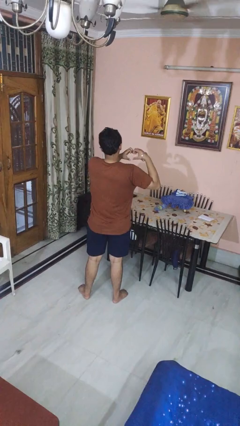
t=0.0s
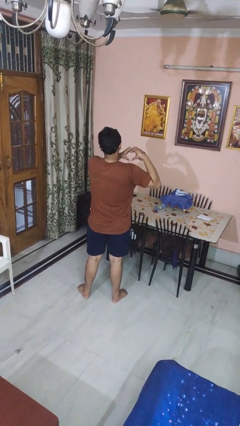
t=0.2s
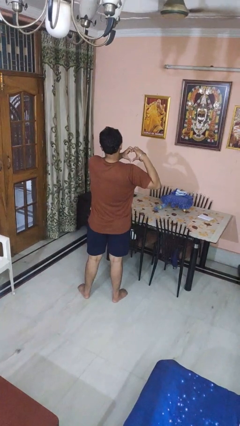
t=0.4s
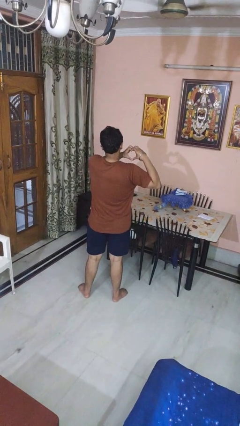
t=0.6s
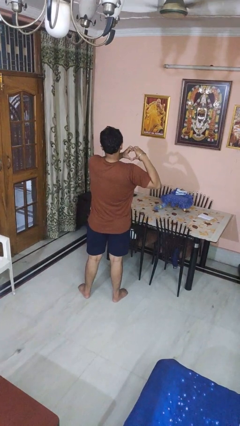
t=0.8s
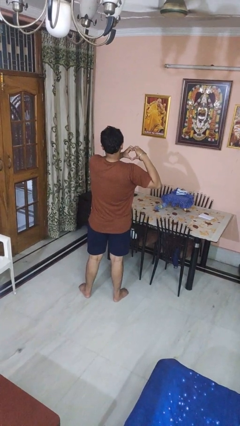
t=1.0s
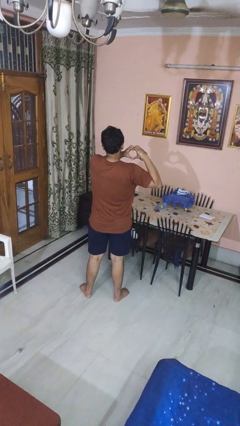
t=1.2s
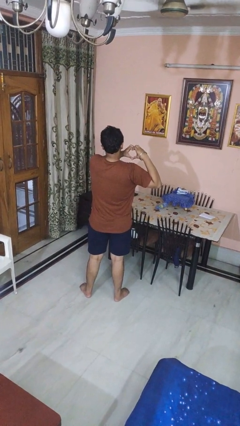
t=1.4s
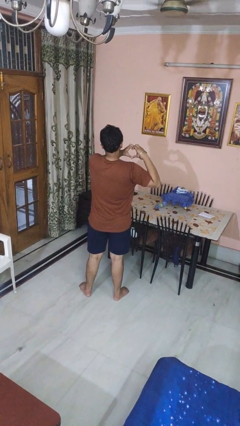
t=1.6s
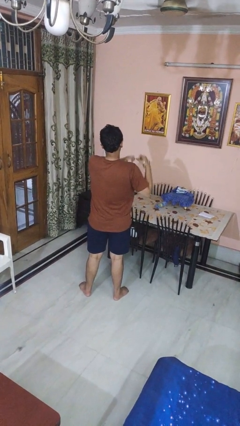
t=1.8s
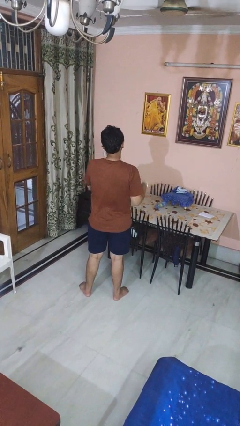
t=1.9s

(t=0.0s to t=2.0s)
person gestures heart

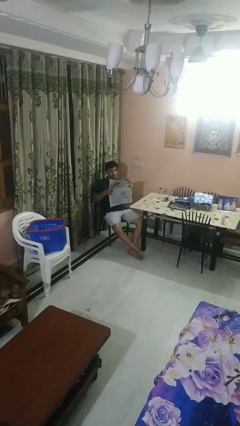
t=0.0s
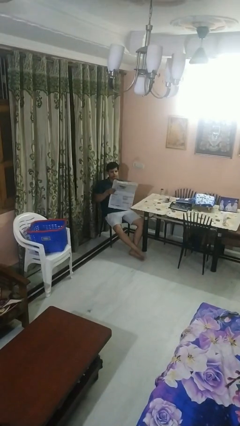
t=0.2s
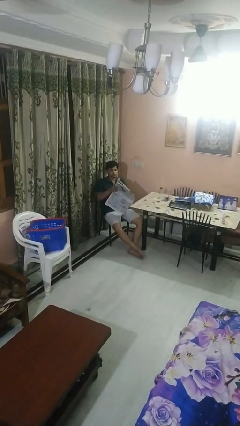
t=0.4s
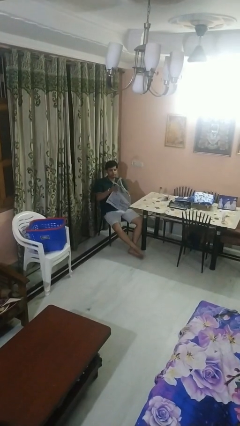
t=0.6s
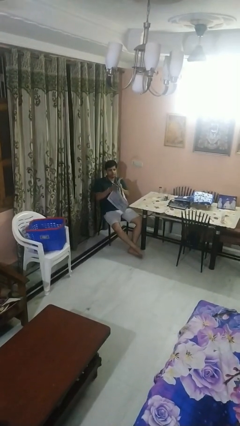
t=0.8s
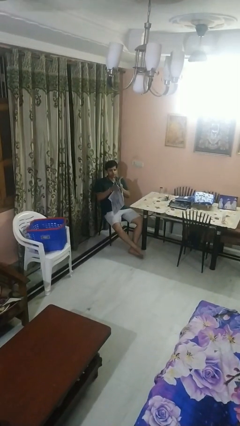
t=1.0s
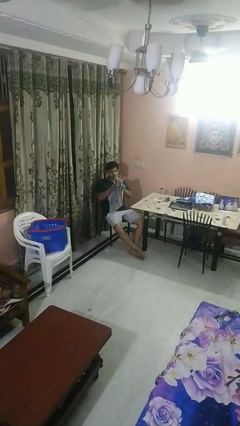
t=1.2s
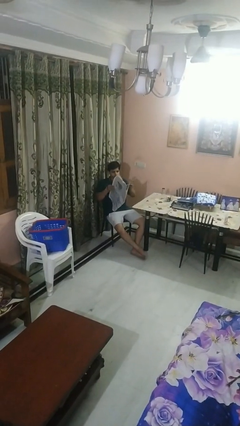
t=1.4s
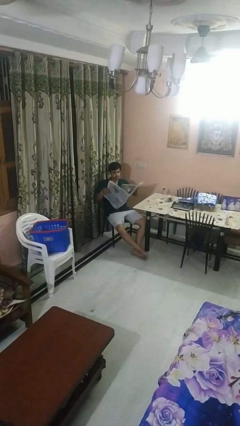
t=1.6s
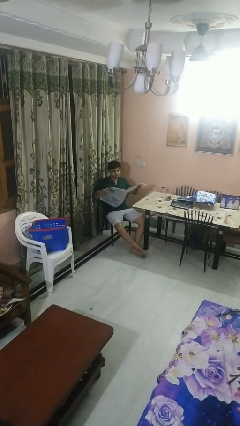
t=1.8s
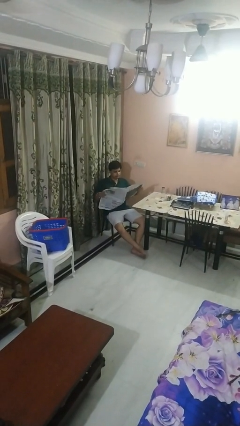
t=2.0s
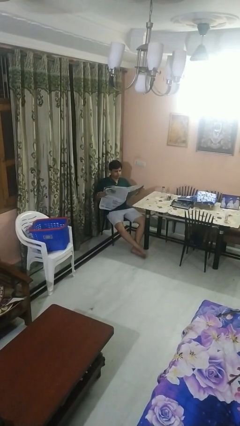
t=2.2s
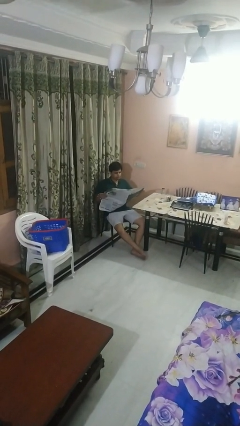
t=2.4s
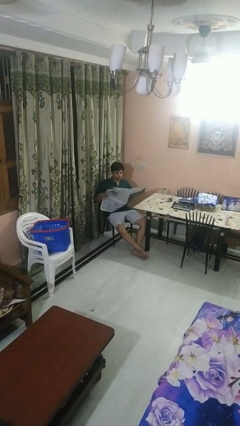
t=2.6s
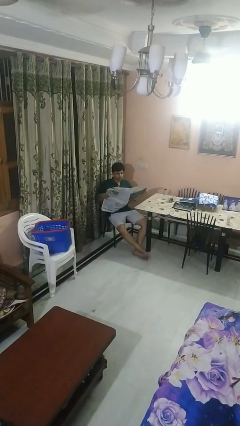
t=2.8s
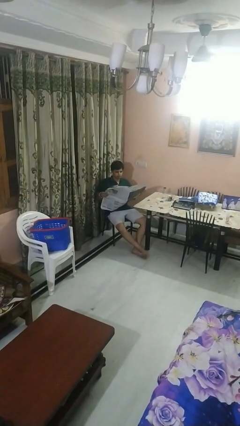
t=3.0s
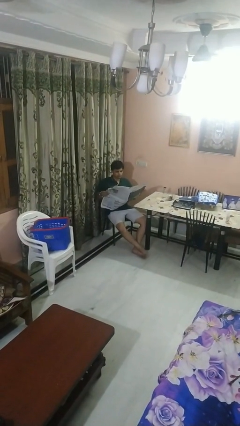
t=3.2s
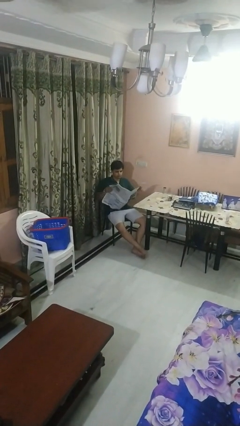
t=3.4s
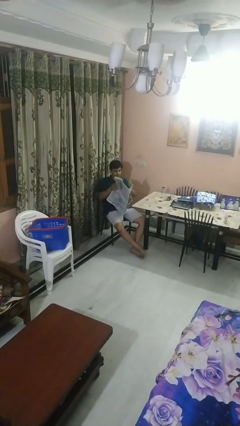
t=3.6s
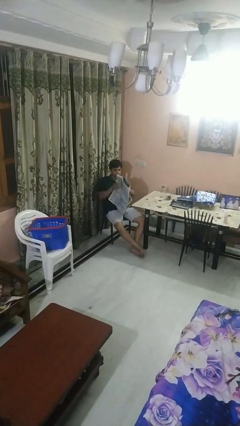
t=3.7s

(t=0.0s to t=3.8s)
person reads newspaper

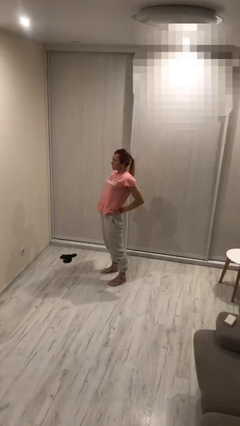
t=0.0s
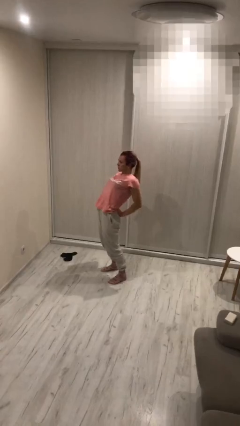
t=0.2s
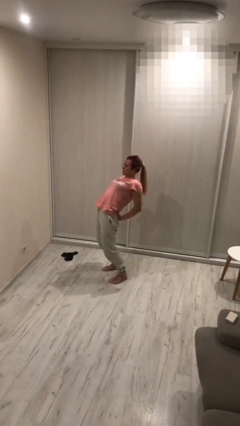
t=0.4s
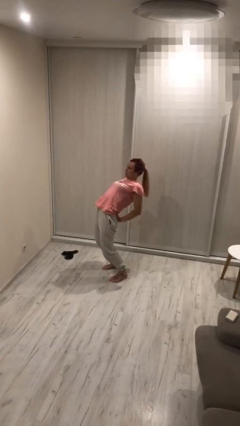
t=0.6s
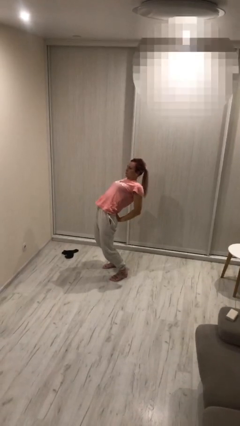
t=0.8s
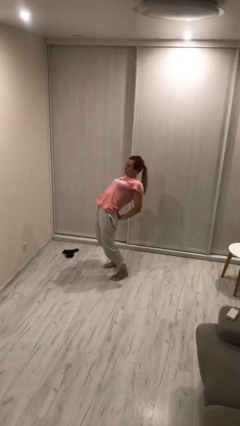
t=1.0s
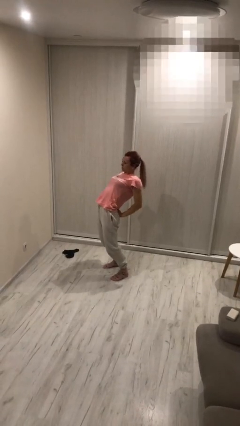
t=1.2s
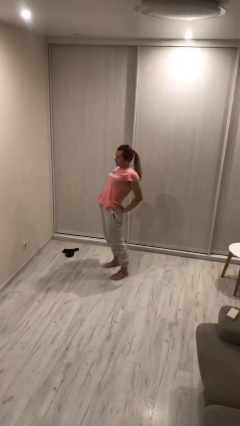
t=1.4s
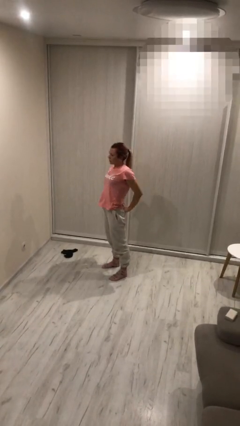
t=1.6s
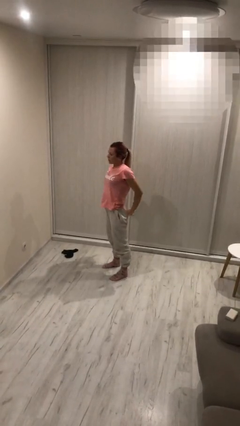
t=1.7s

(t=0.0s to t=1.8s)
person stretches back

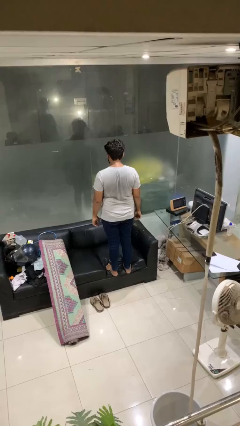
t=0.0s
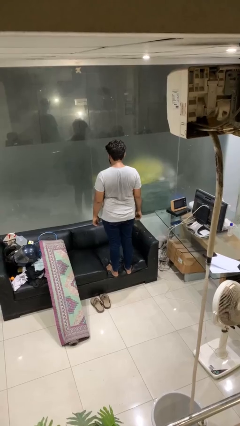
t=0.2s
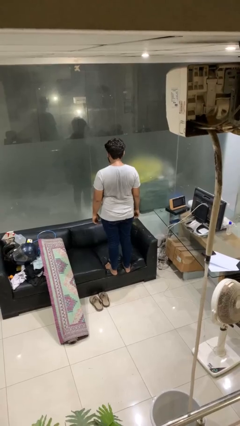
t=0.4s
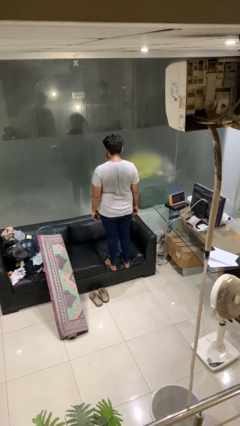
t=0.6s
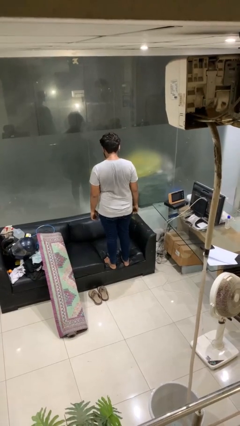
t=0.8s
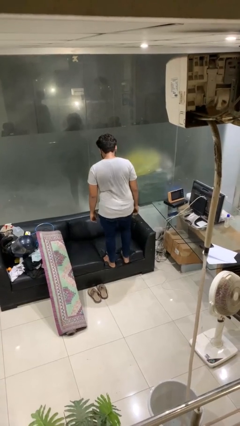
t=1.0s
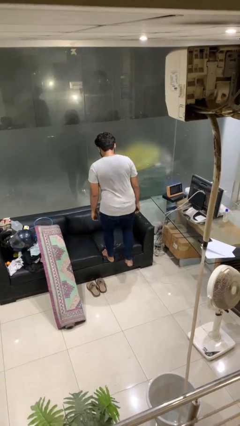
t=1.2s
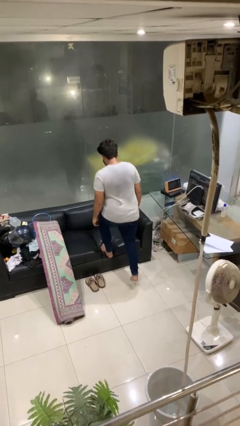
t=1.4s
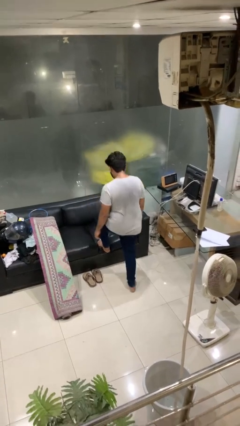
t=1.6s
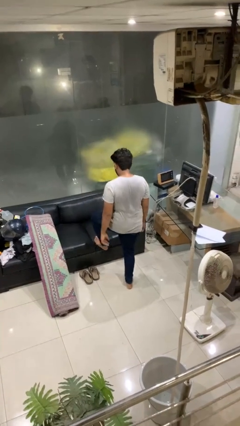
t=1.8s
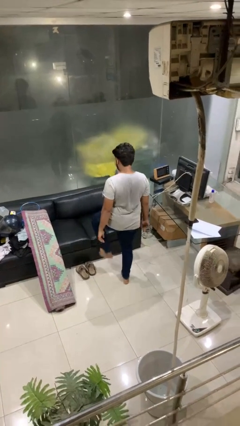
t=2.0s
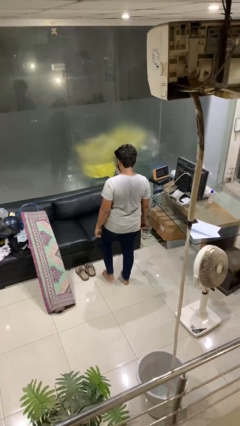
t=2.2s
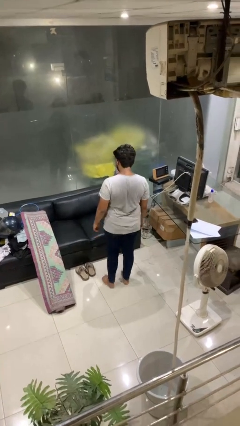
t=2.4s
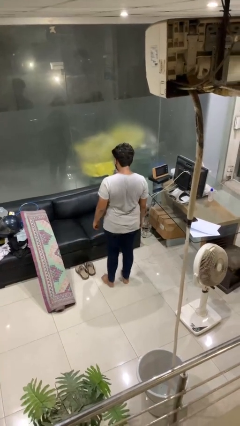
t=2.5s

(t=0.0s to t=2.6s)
person climbs off couch

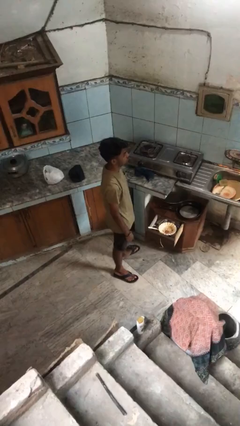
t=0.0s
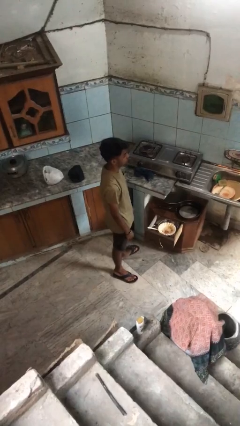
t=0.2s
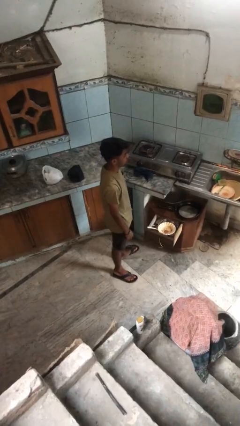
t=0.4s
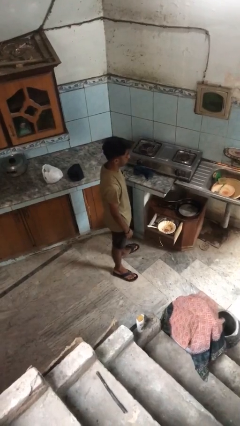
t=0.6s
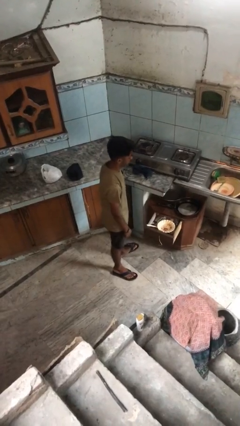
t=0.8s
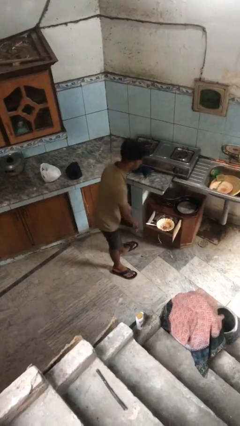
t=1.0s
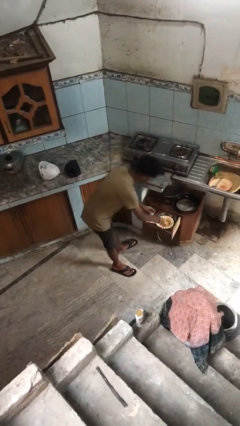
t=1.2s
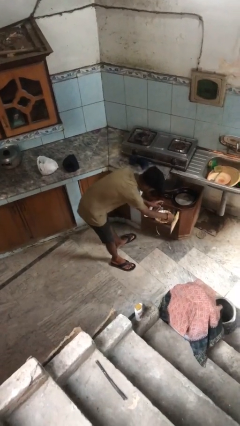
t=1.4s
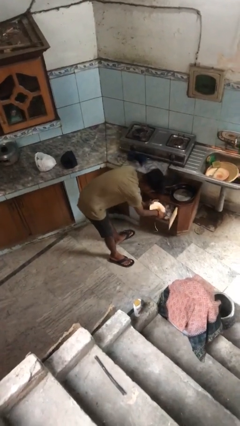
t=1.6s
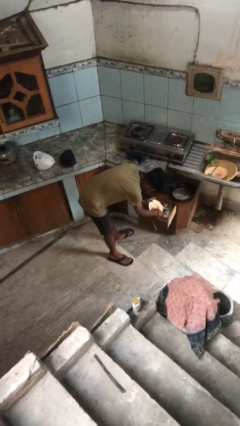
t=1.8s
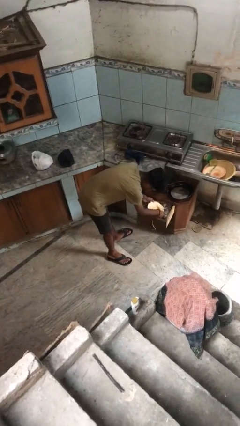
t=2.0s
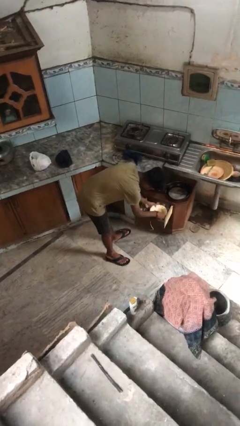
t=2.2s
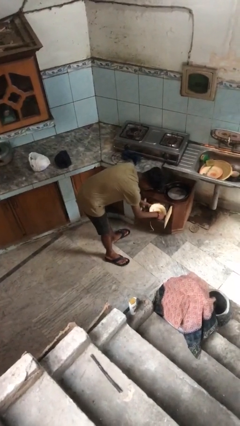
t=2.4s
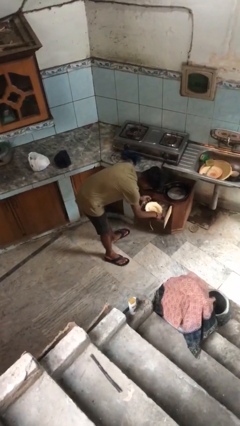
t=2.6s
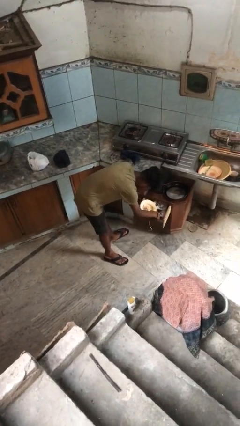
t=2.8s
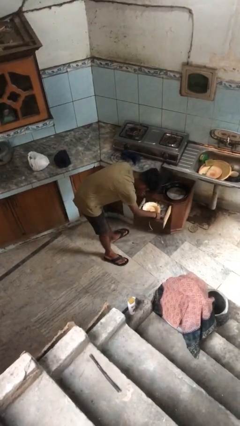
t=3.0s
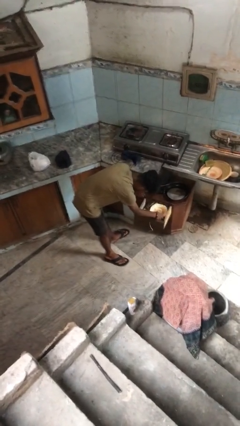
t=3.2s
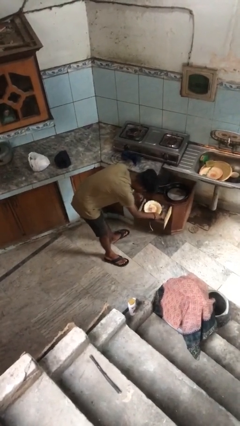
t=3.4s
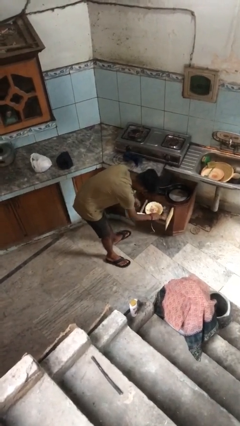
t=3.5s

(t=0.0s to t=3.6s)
person searches in kitchen drawer

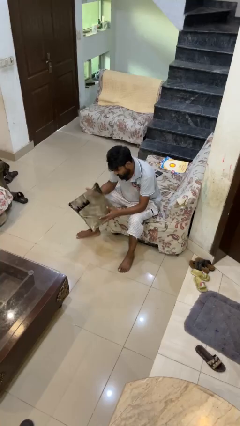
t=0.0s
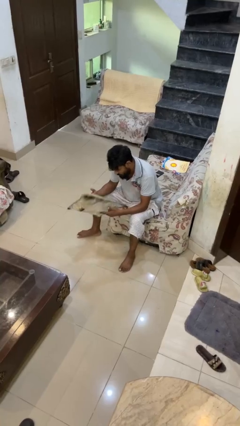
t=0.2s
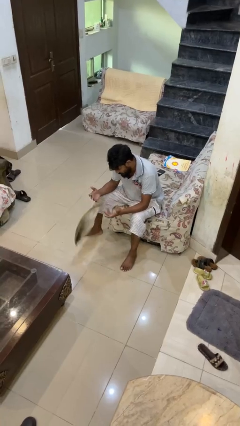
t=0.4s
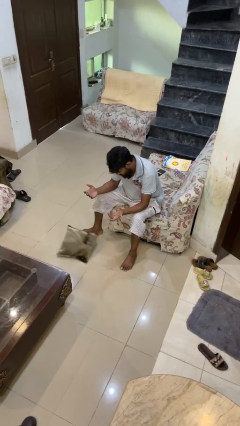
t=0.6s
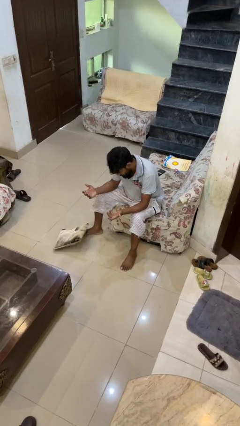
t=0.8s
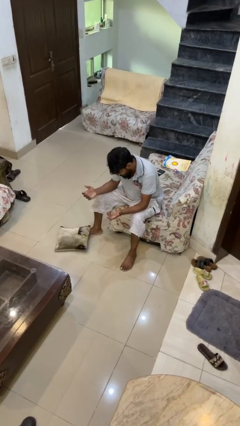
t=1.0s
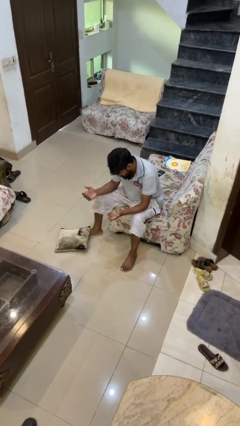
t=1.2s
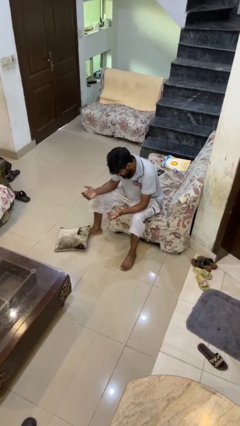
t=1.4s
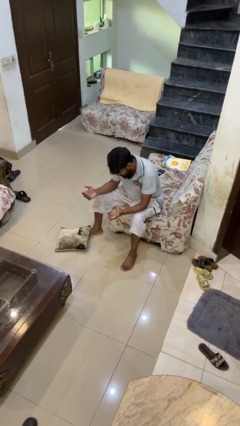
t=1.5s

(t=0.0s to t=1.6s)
person drops object

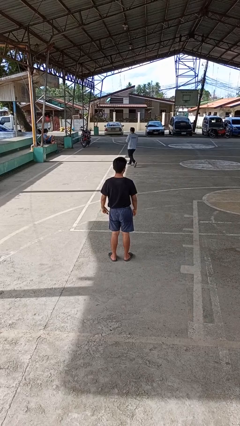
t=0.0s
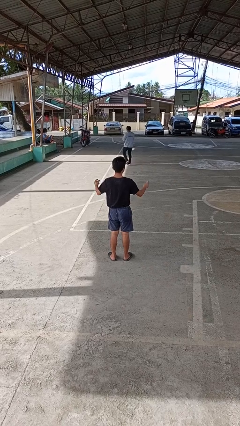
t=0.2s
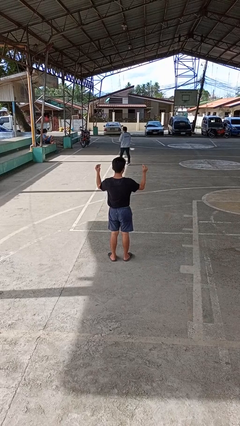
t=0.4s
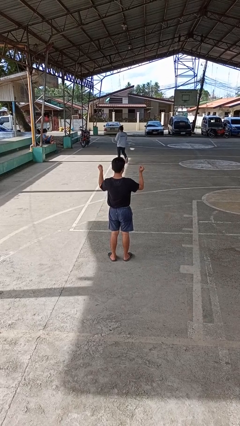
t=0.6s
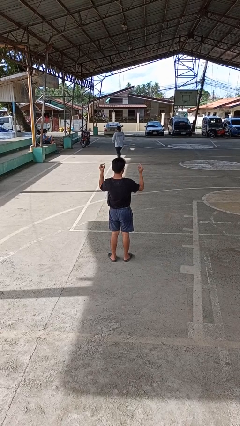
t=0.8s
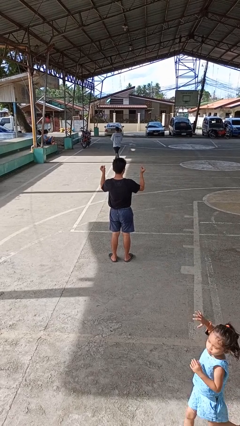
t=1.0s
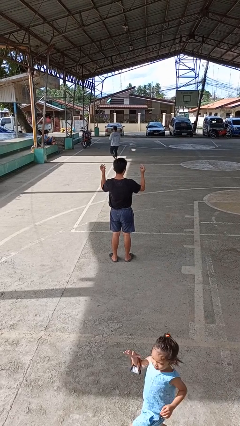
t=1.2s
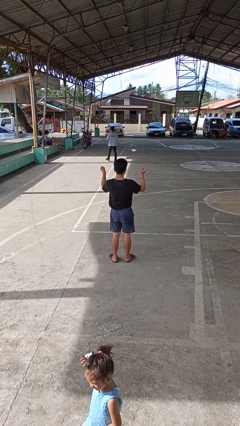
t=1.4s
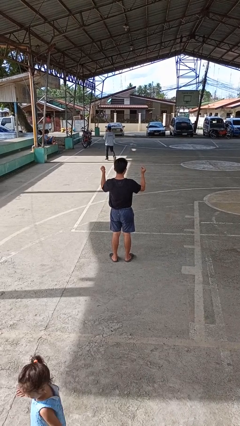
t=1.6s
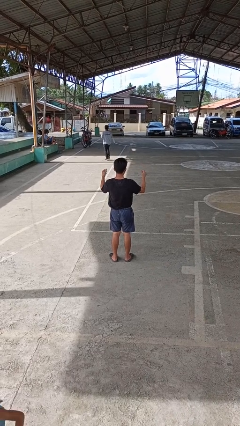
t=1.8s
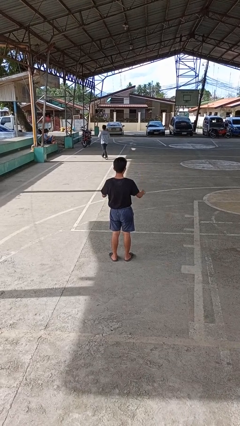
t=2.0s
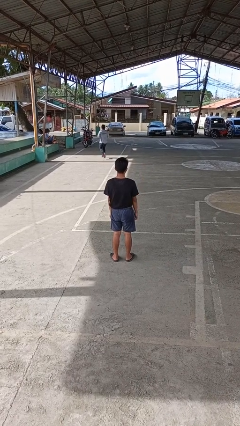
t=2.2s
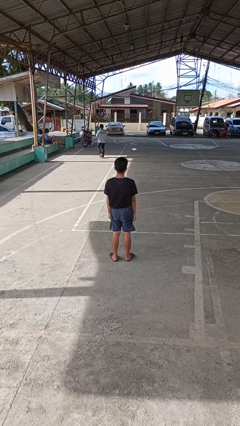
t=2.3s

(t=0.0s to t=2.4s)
person snaps fingers
